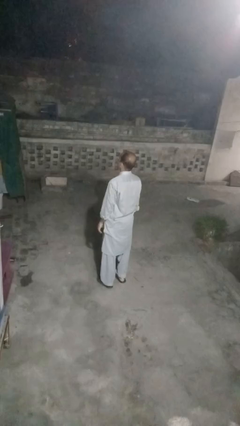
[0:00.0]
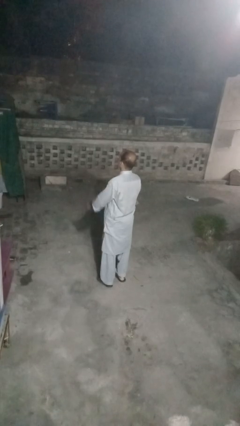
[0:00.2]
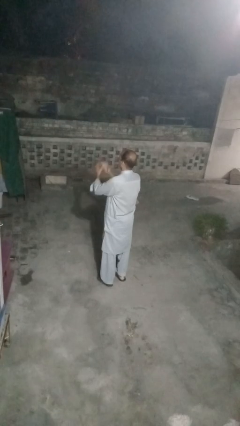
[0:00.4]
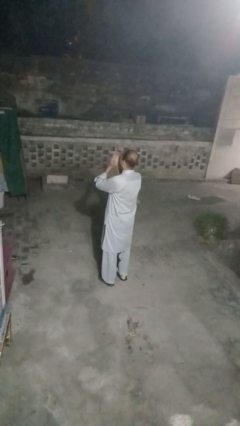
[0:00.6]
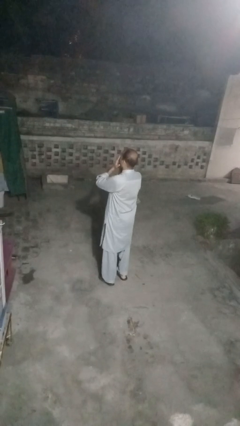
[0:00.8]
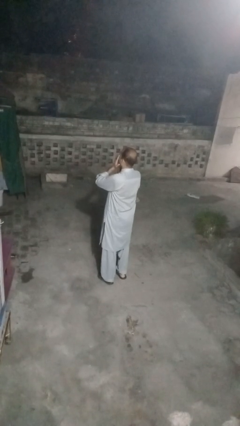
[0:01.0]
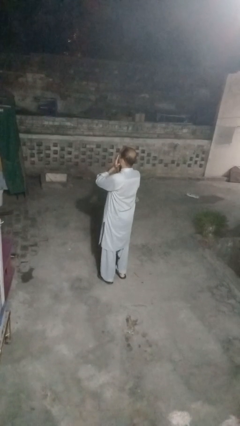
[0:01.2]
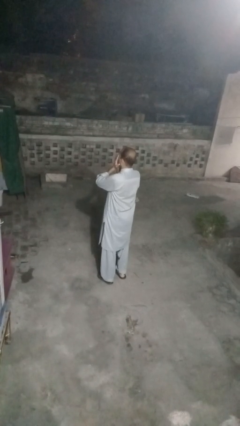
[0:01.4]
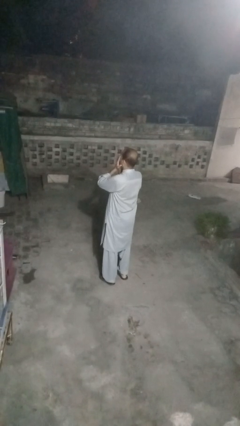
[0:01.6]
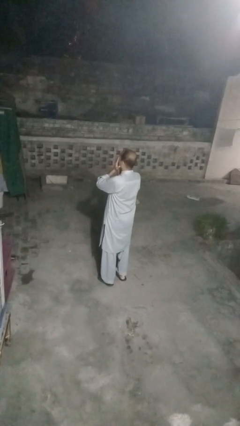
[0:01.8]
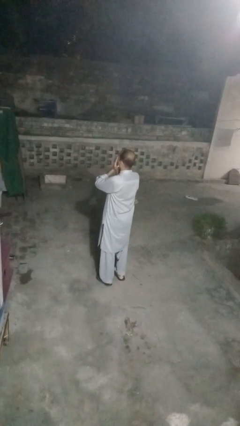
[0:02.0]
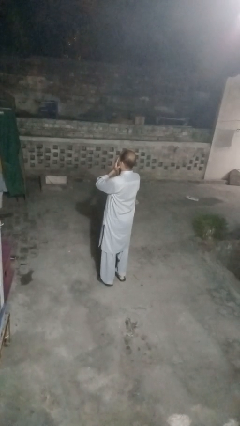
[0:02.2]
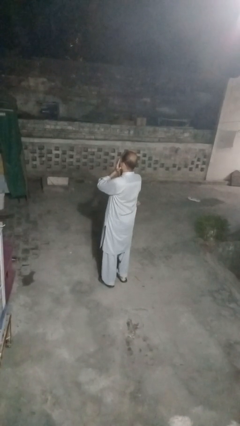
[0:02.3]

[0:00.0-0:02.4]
person covers face with hands

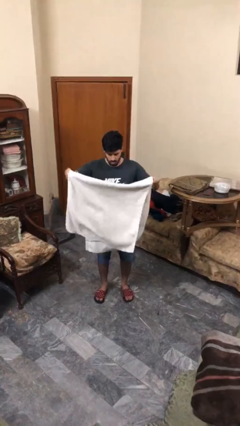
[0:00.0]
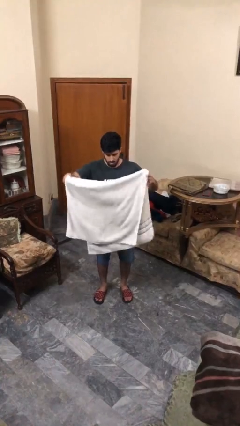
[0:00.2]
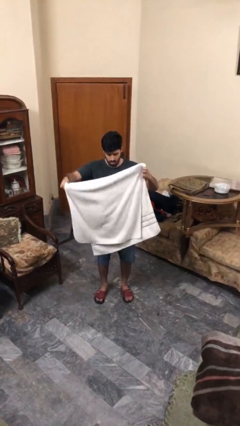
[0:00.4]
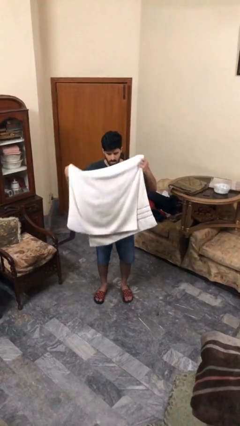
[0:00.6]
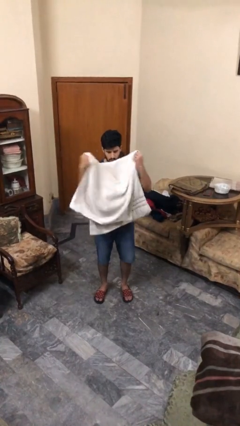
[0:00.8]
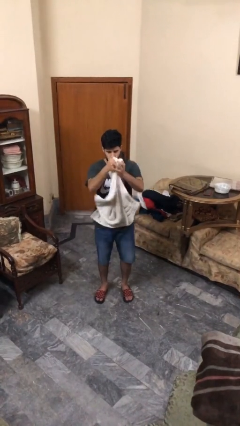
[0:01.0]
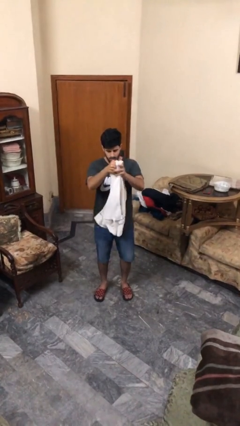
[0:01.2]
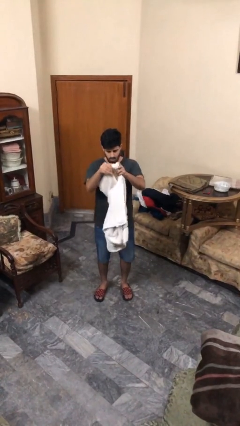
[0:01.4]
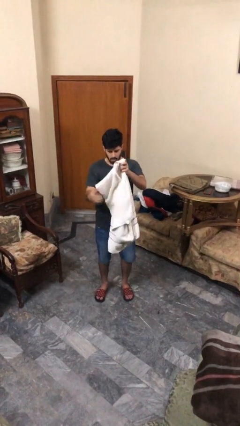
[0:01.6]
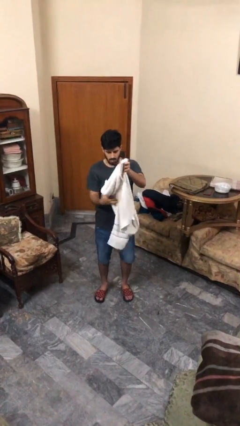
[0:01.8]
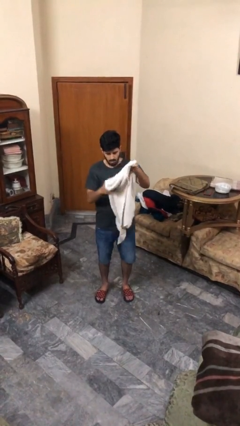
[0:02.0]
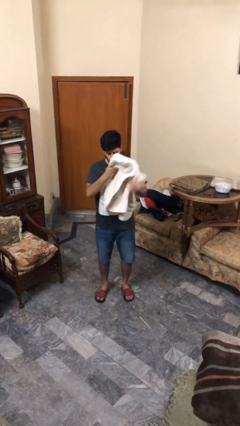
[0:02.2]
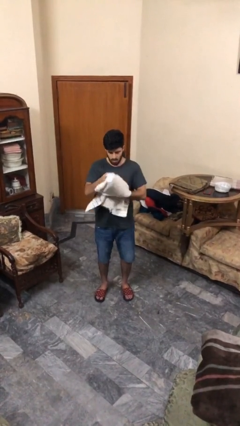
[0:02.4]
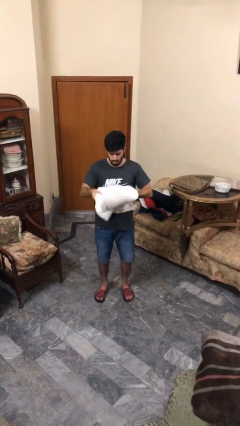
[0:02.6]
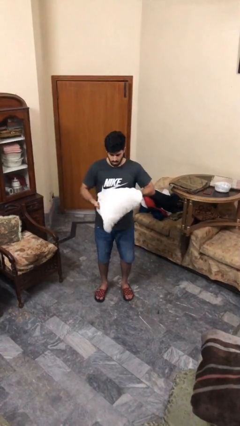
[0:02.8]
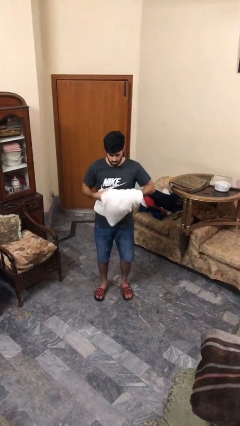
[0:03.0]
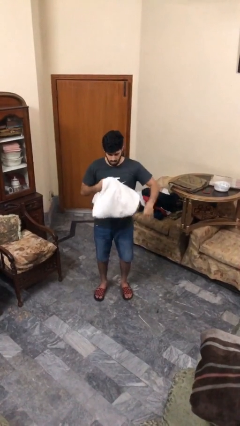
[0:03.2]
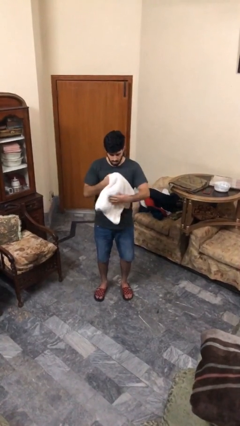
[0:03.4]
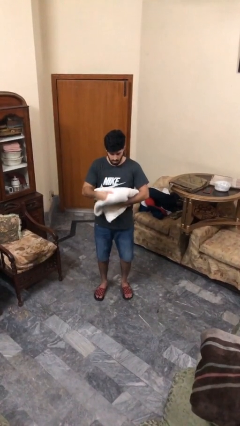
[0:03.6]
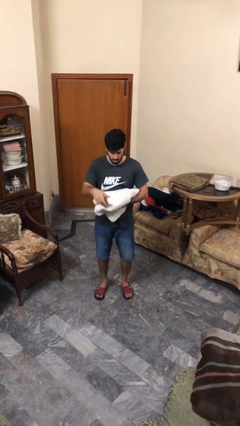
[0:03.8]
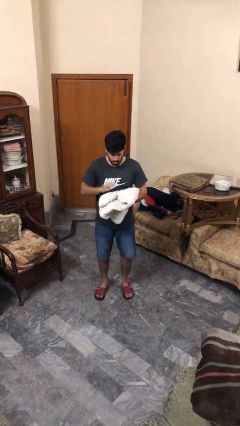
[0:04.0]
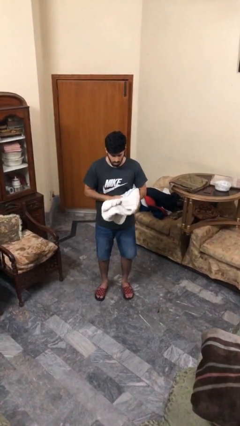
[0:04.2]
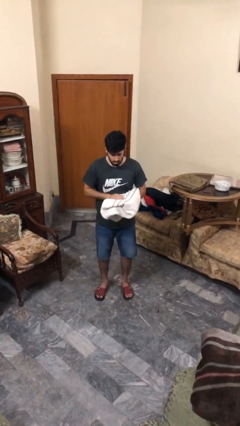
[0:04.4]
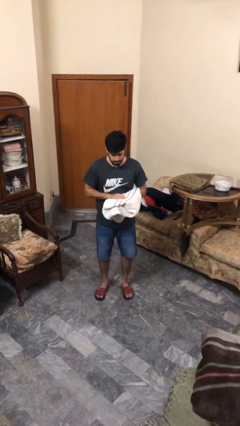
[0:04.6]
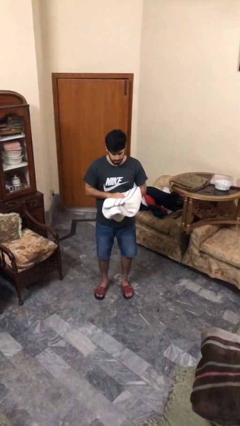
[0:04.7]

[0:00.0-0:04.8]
person folds towel

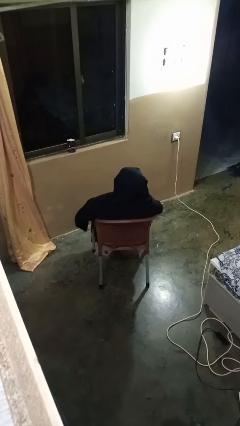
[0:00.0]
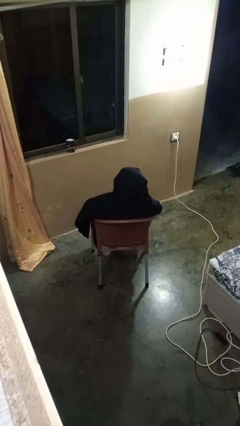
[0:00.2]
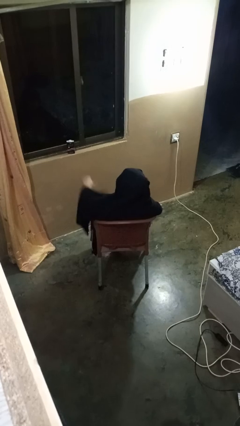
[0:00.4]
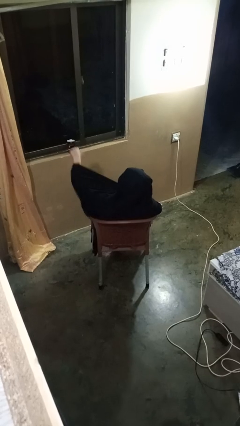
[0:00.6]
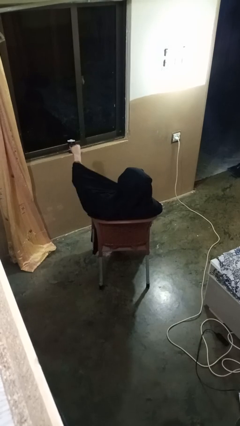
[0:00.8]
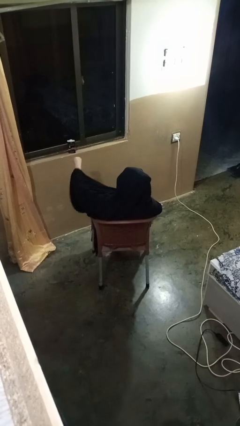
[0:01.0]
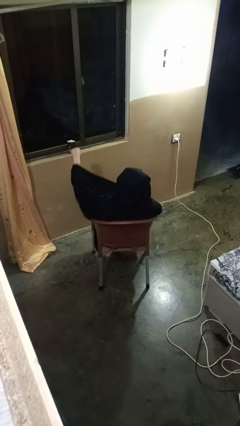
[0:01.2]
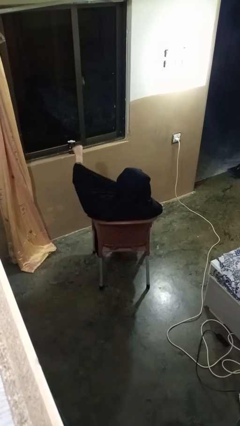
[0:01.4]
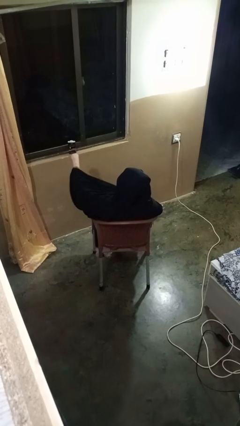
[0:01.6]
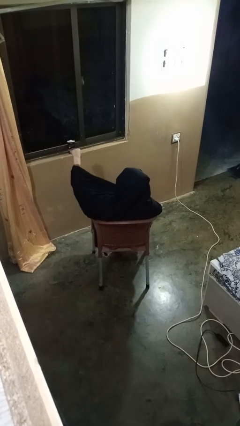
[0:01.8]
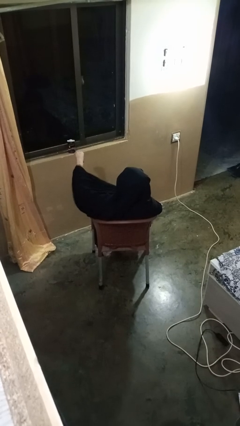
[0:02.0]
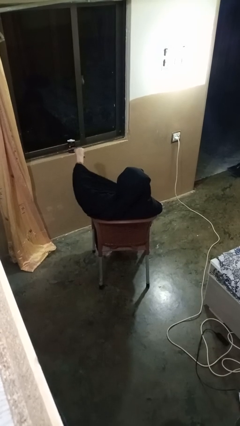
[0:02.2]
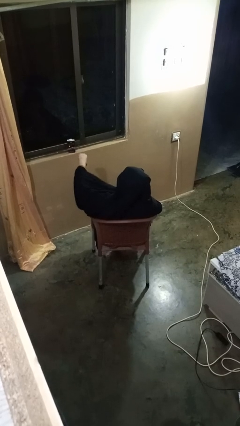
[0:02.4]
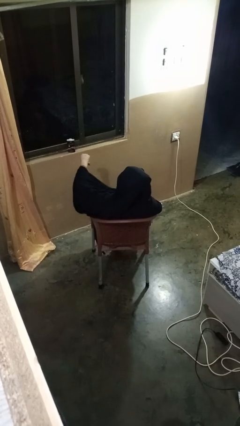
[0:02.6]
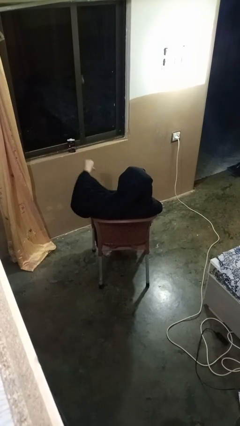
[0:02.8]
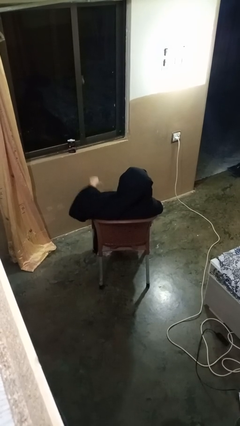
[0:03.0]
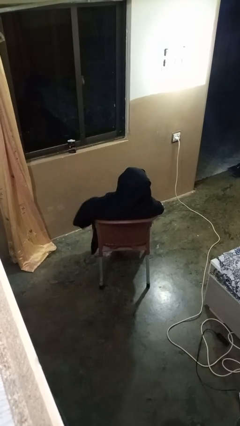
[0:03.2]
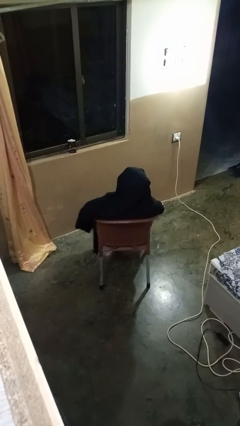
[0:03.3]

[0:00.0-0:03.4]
person gestures thumbs down

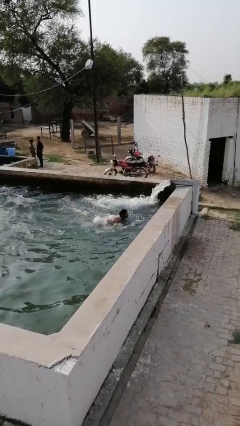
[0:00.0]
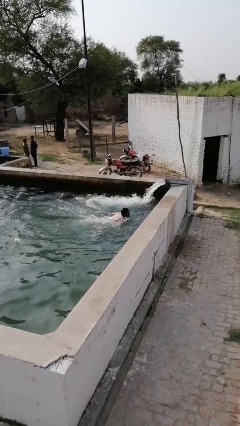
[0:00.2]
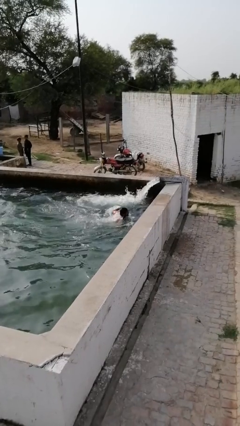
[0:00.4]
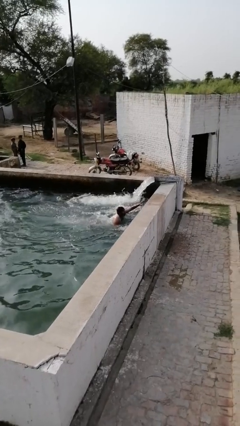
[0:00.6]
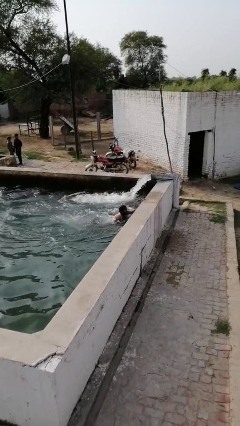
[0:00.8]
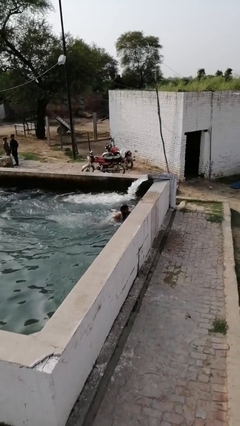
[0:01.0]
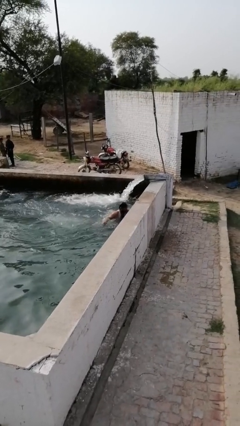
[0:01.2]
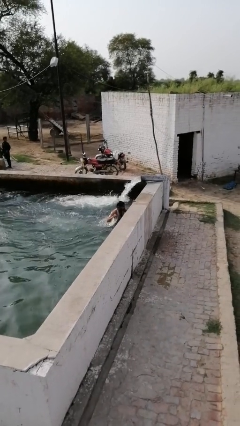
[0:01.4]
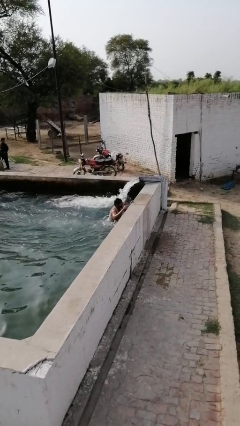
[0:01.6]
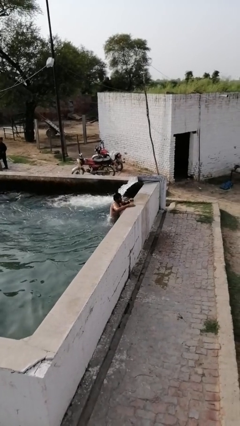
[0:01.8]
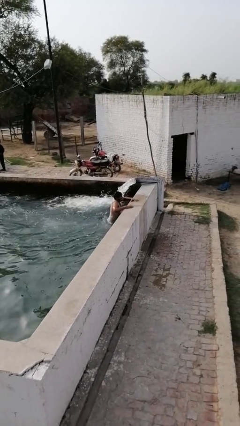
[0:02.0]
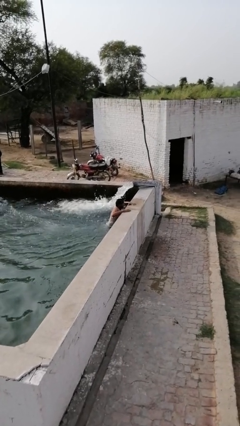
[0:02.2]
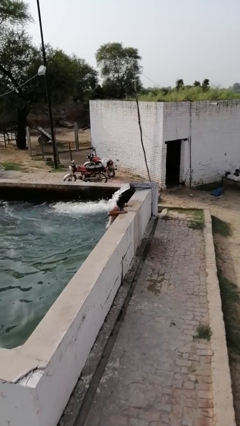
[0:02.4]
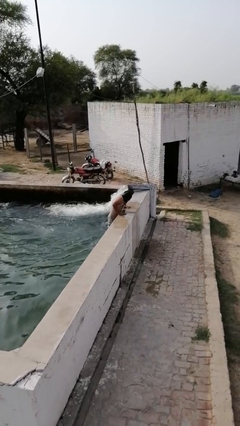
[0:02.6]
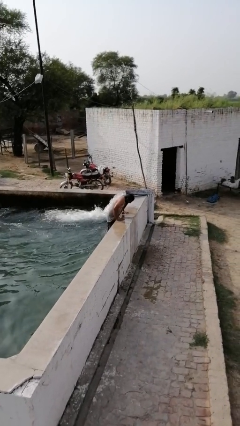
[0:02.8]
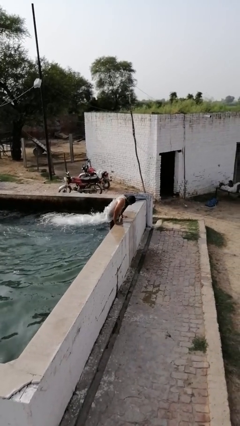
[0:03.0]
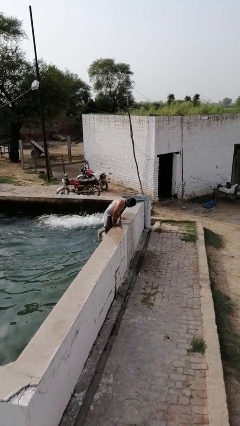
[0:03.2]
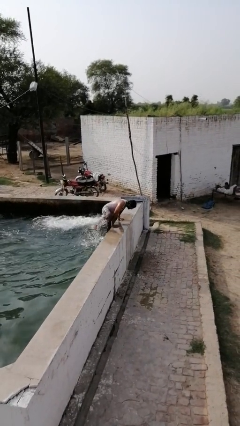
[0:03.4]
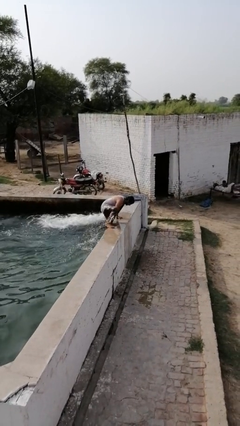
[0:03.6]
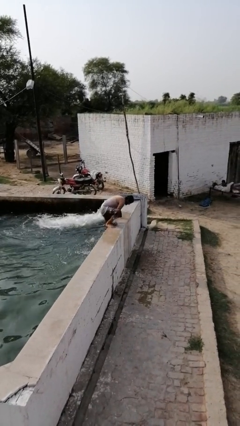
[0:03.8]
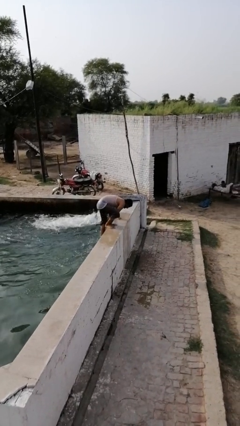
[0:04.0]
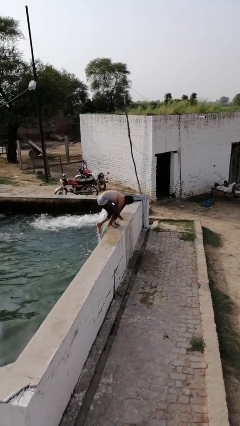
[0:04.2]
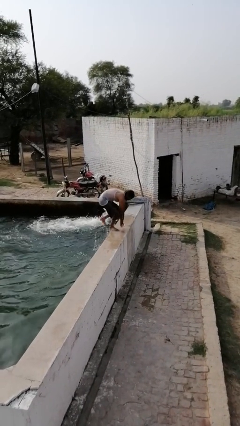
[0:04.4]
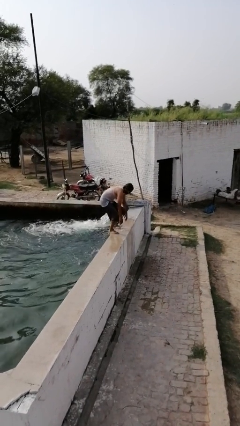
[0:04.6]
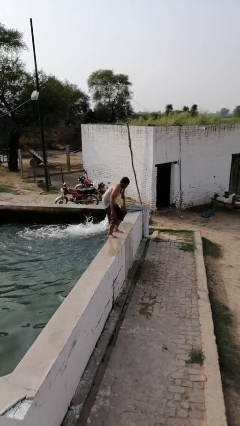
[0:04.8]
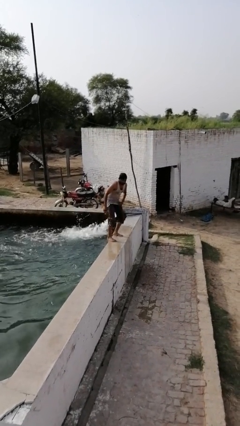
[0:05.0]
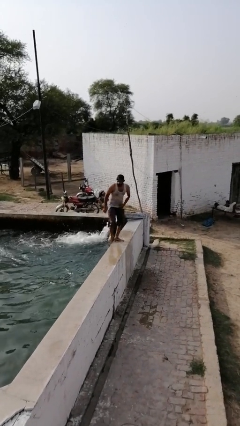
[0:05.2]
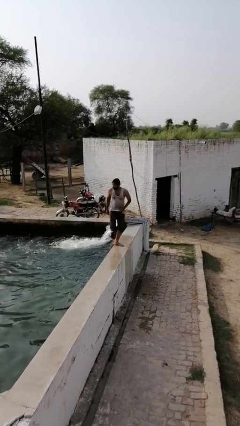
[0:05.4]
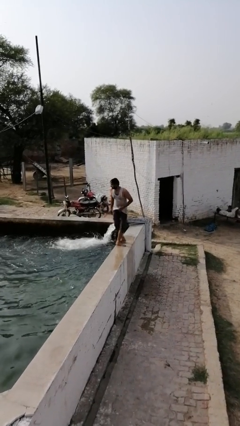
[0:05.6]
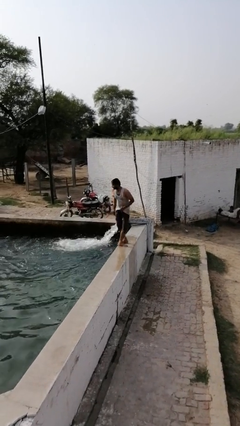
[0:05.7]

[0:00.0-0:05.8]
person exits pool

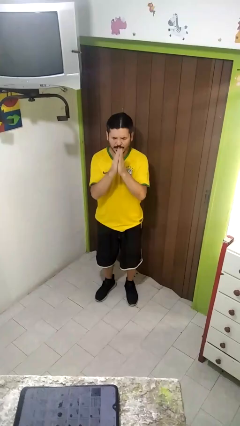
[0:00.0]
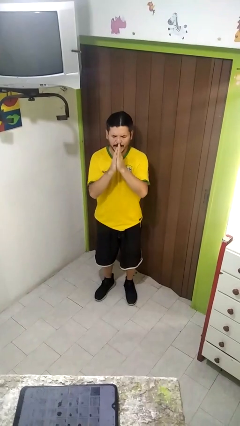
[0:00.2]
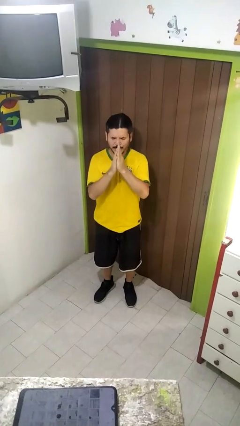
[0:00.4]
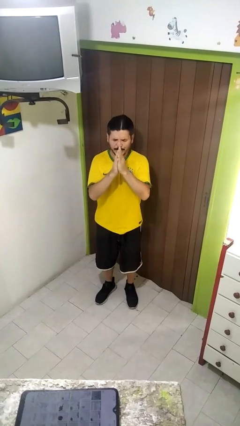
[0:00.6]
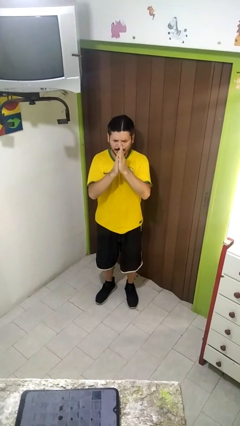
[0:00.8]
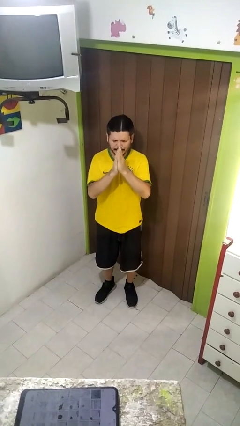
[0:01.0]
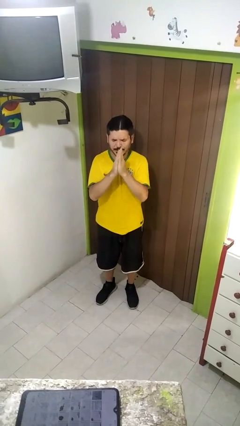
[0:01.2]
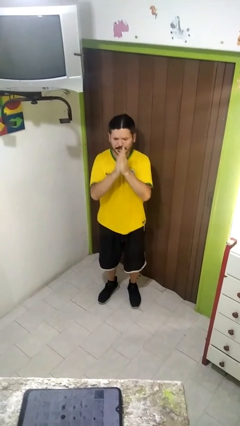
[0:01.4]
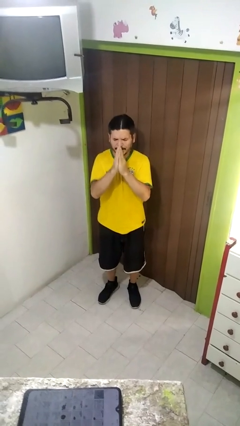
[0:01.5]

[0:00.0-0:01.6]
person blows into hands
